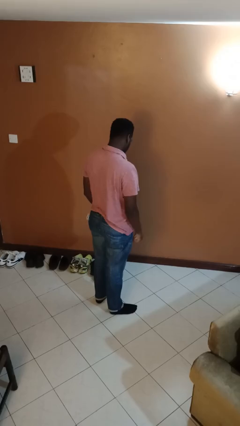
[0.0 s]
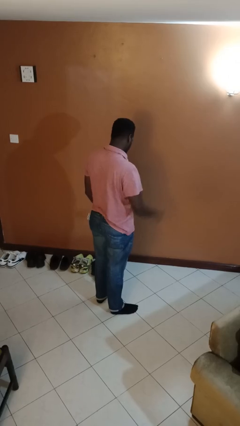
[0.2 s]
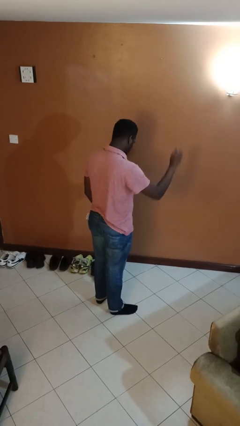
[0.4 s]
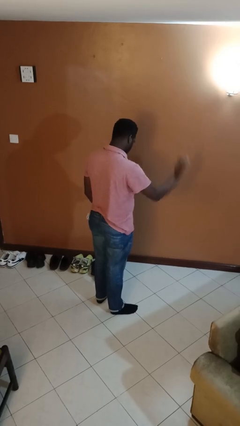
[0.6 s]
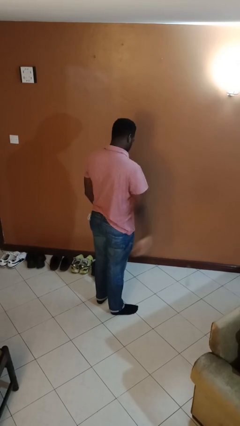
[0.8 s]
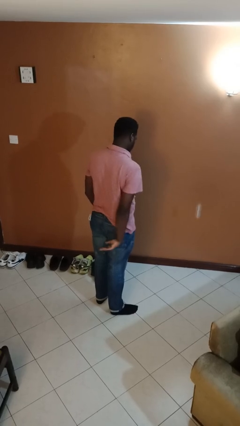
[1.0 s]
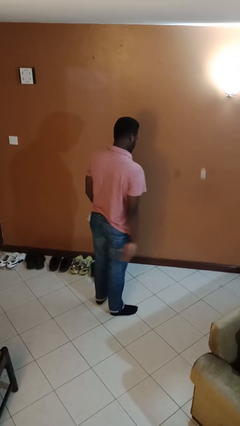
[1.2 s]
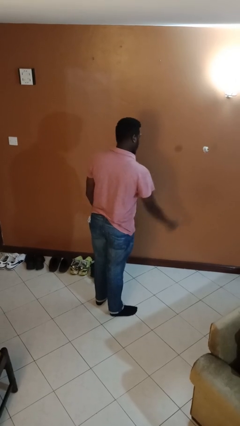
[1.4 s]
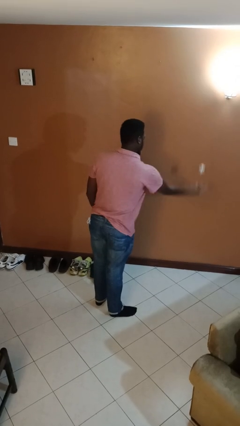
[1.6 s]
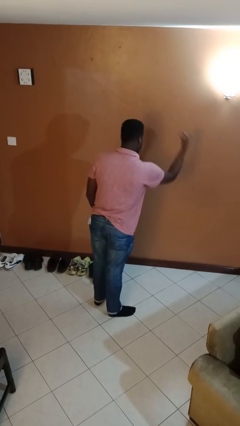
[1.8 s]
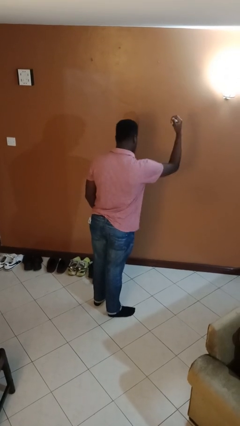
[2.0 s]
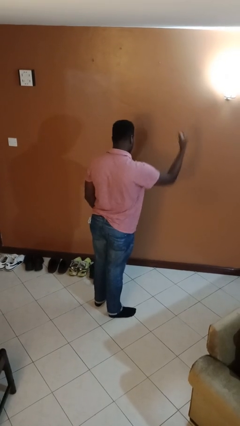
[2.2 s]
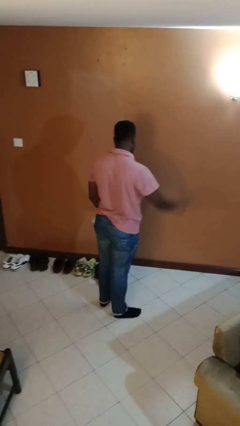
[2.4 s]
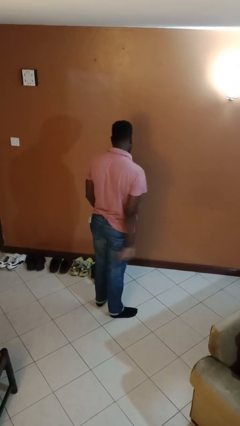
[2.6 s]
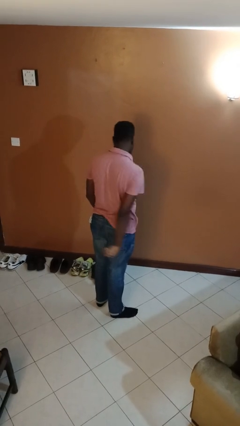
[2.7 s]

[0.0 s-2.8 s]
person bounces ball on floor

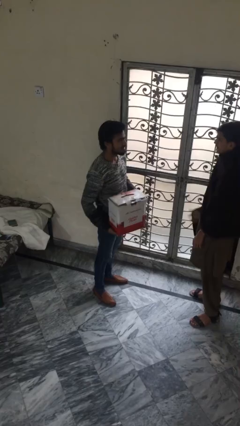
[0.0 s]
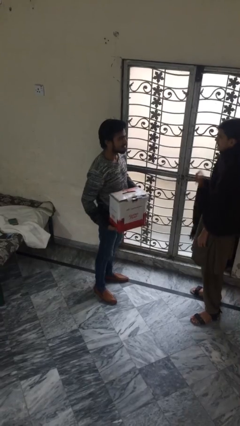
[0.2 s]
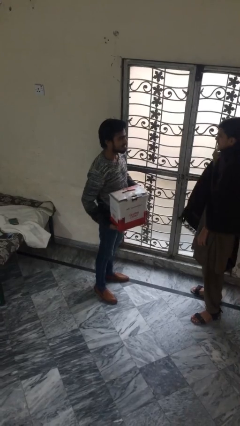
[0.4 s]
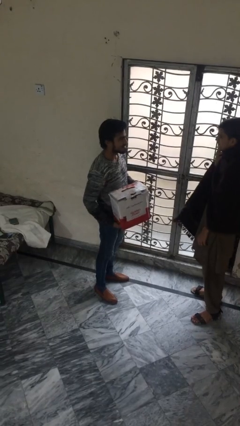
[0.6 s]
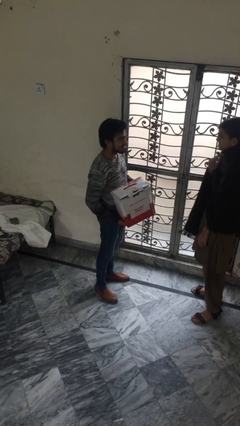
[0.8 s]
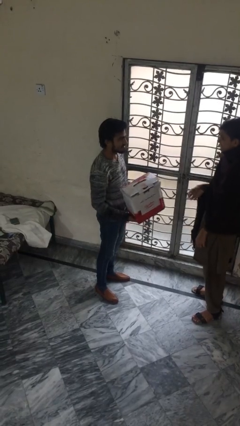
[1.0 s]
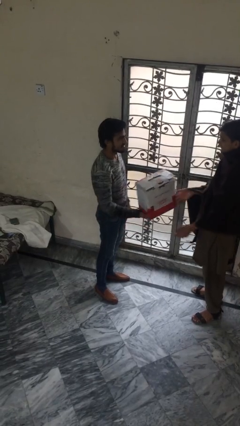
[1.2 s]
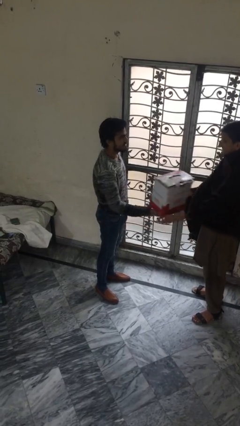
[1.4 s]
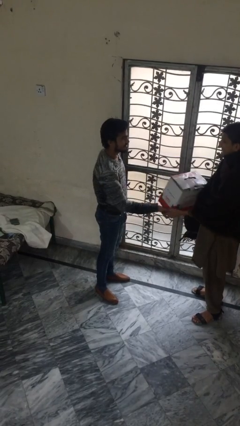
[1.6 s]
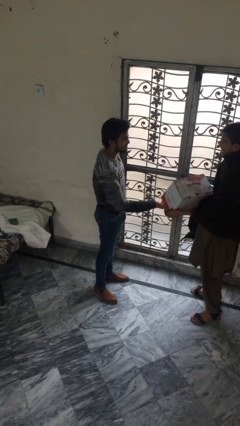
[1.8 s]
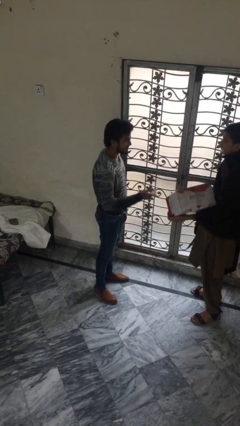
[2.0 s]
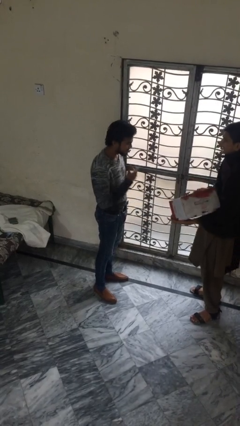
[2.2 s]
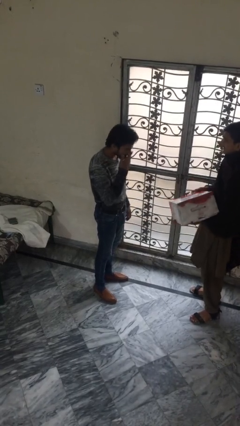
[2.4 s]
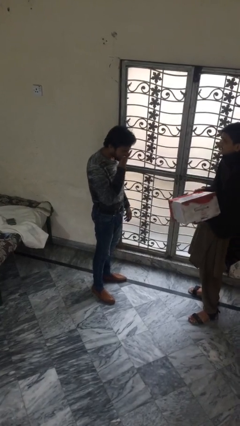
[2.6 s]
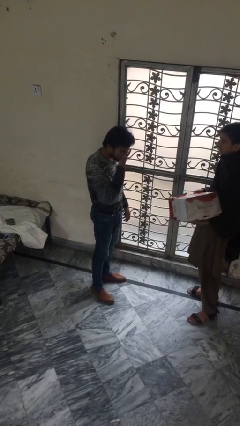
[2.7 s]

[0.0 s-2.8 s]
person transfers object to person

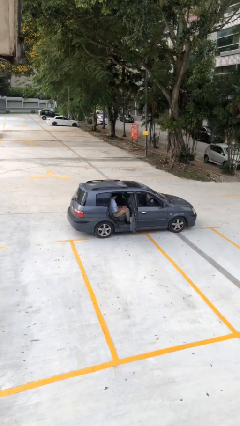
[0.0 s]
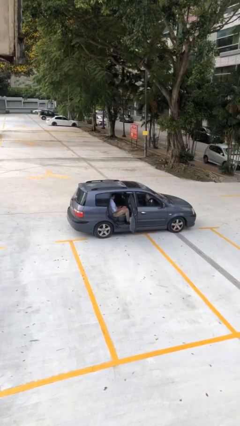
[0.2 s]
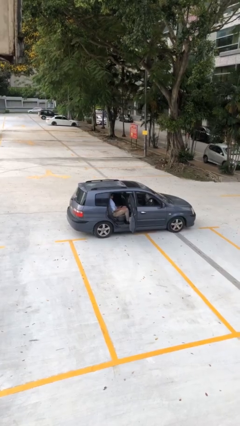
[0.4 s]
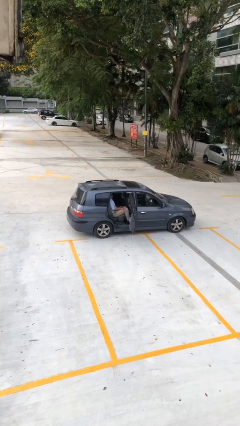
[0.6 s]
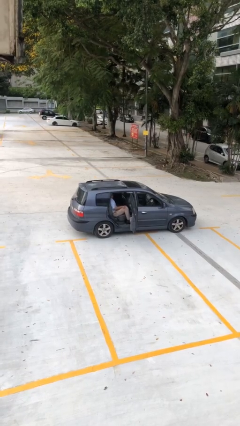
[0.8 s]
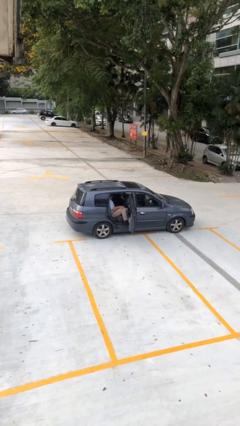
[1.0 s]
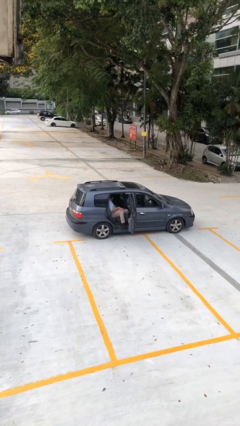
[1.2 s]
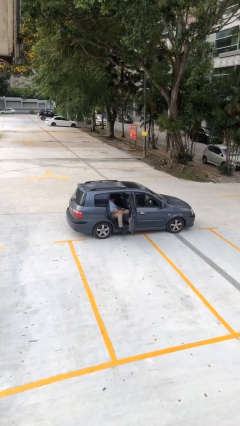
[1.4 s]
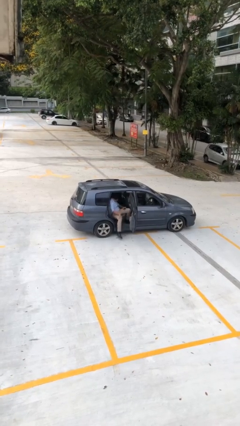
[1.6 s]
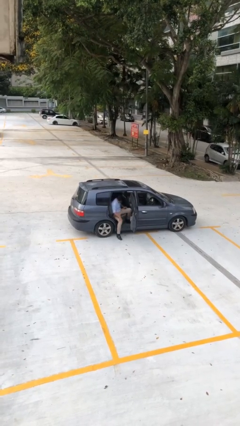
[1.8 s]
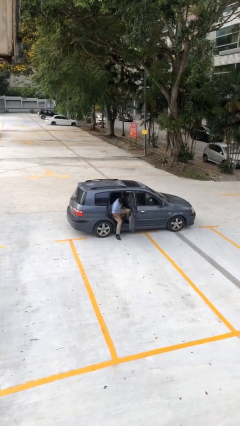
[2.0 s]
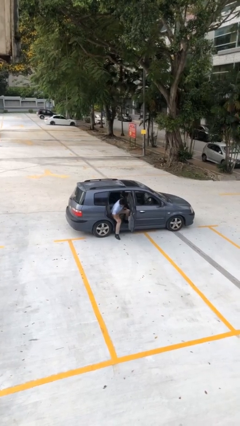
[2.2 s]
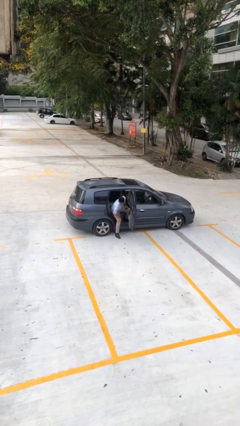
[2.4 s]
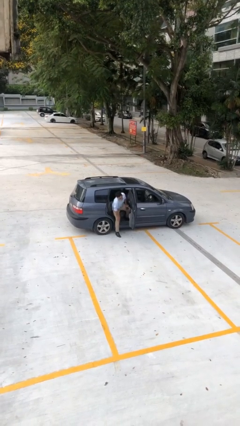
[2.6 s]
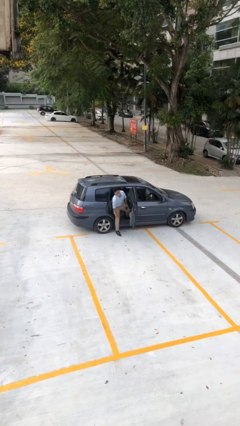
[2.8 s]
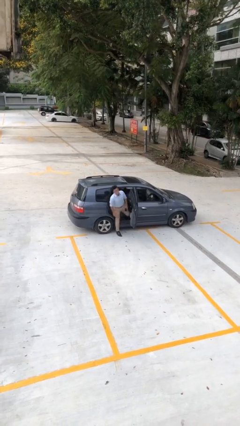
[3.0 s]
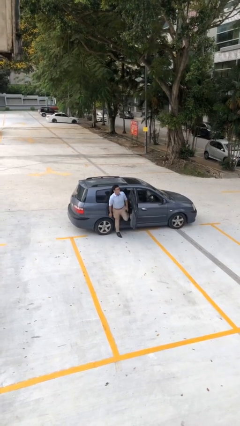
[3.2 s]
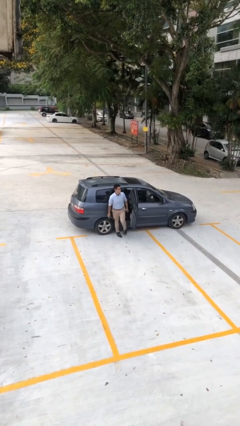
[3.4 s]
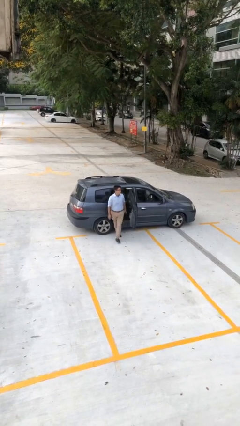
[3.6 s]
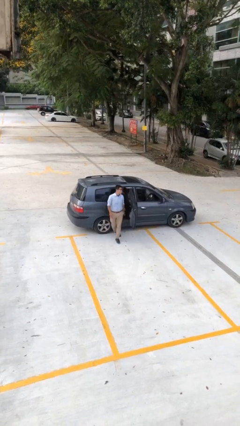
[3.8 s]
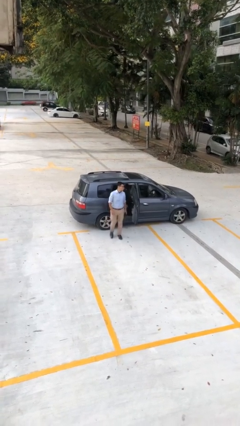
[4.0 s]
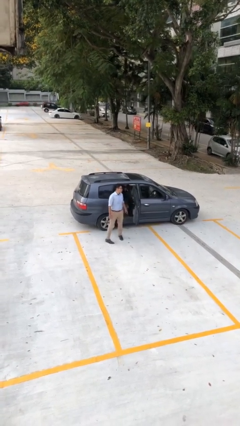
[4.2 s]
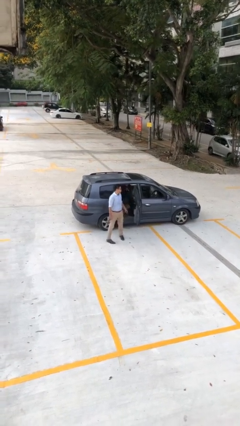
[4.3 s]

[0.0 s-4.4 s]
person exits car

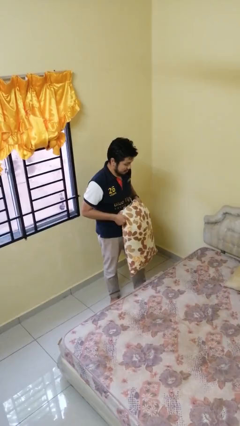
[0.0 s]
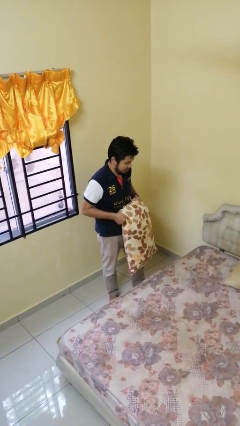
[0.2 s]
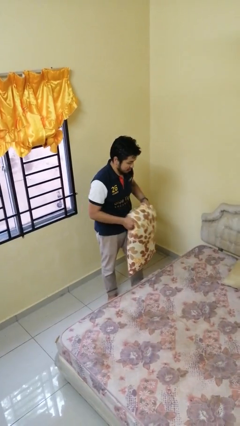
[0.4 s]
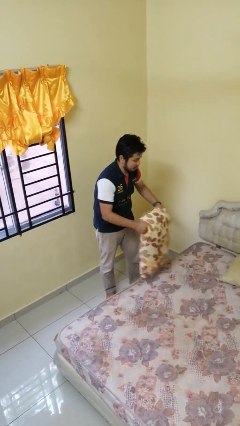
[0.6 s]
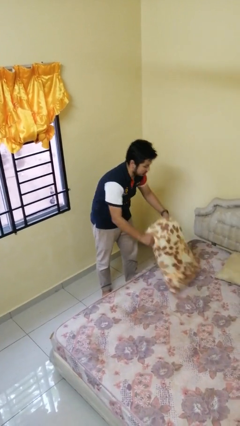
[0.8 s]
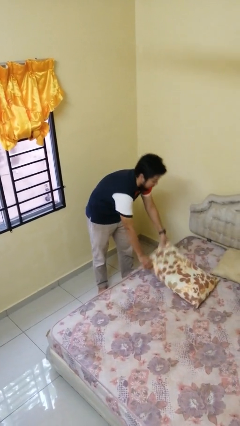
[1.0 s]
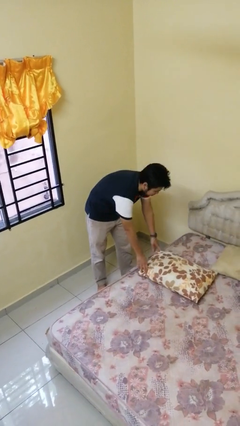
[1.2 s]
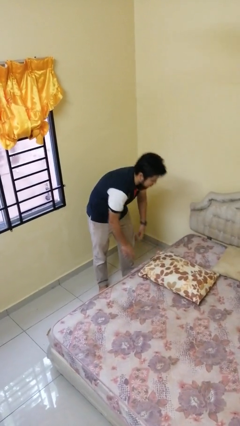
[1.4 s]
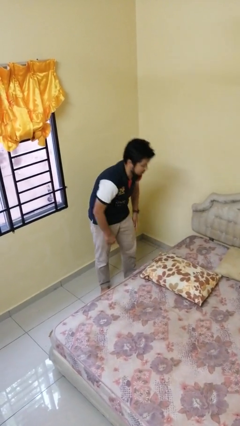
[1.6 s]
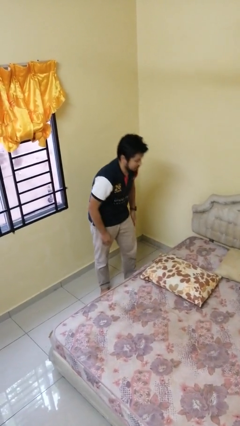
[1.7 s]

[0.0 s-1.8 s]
person puts down object on bed

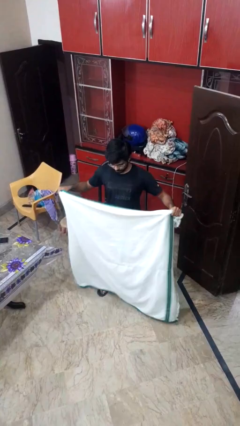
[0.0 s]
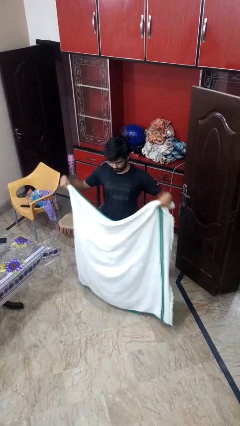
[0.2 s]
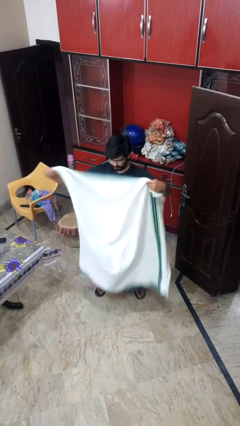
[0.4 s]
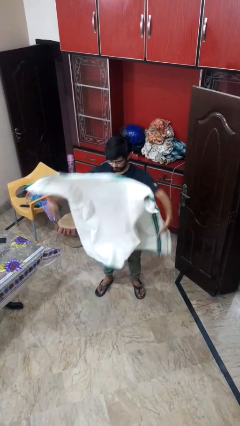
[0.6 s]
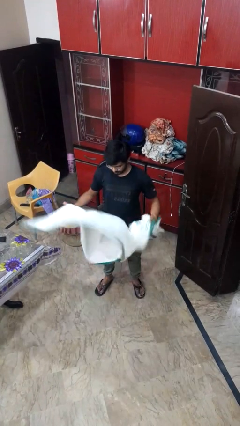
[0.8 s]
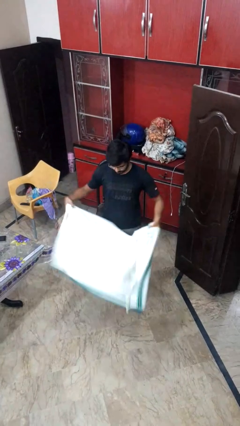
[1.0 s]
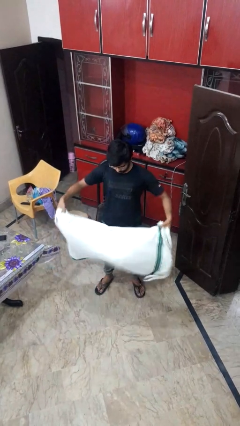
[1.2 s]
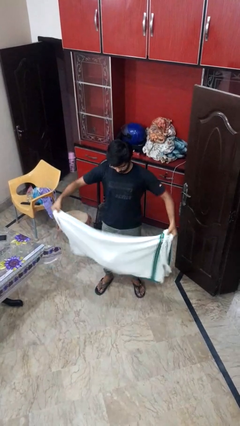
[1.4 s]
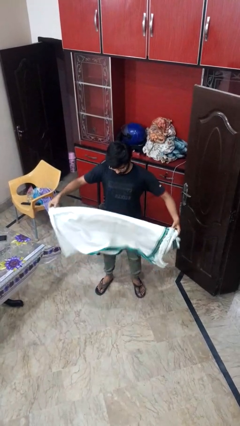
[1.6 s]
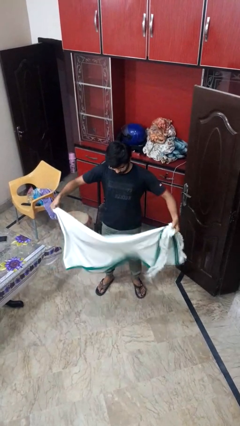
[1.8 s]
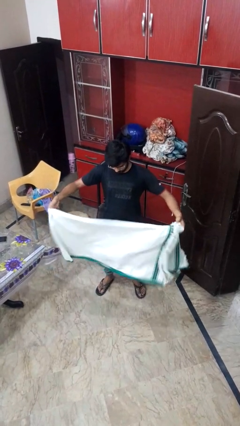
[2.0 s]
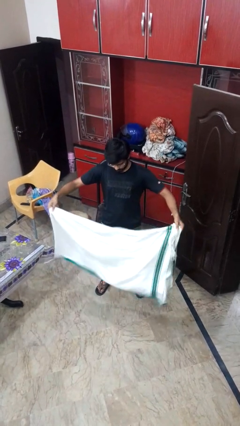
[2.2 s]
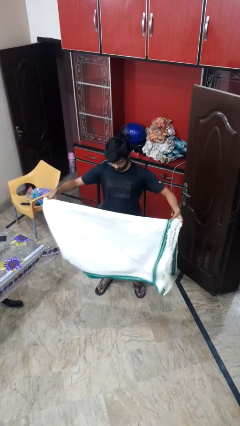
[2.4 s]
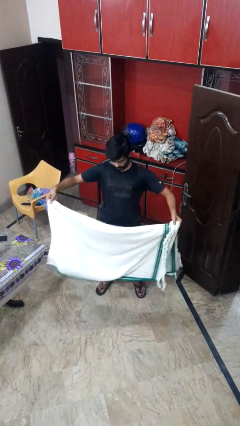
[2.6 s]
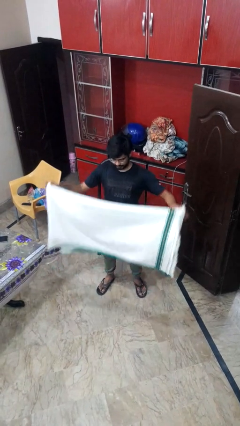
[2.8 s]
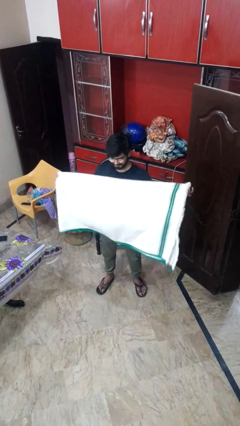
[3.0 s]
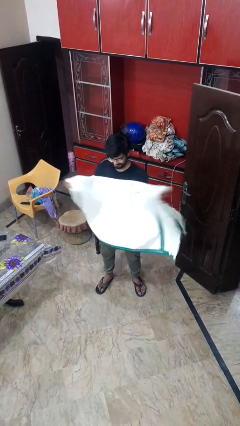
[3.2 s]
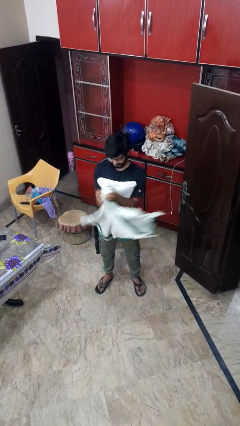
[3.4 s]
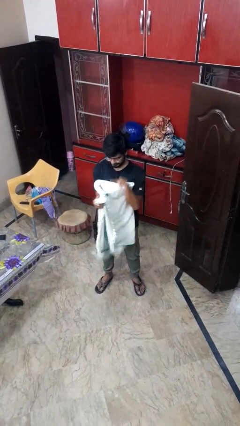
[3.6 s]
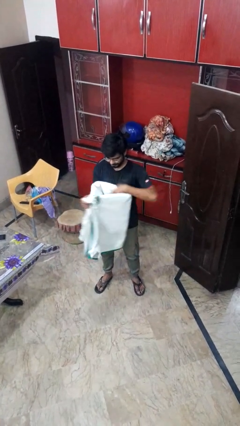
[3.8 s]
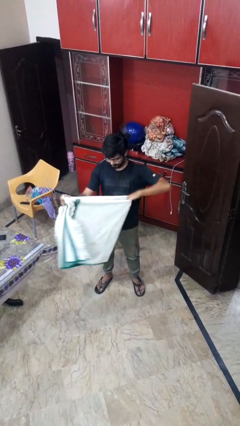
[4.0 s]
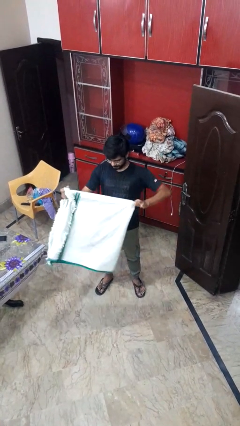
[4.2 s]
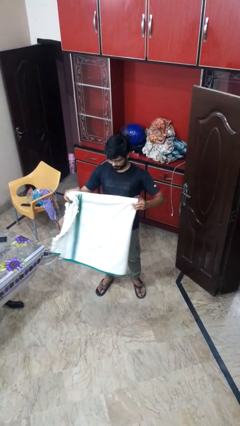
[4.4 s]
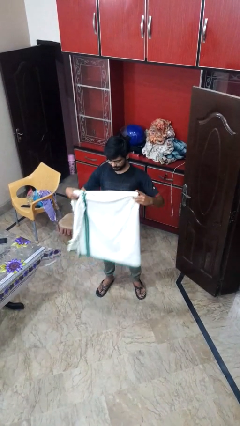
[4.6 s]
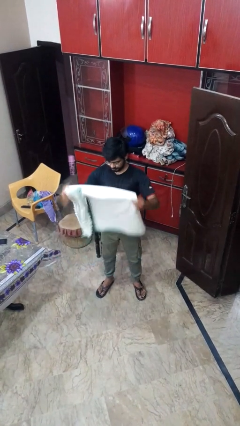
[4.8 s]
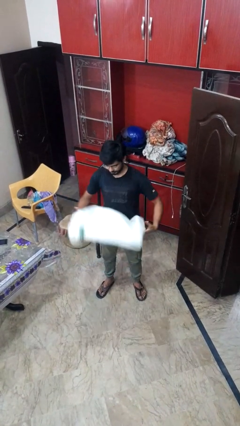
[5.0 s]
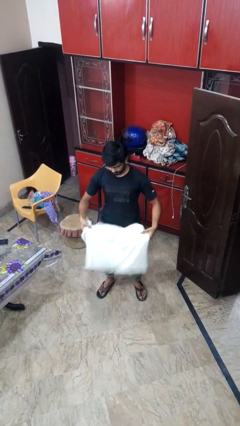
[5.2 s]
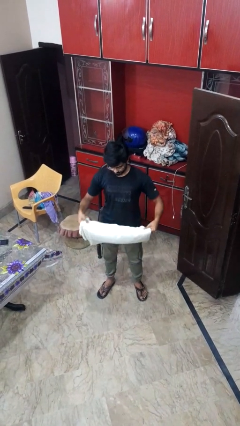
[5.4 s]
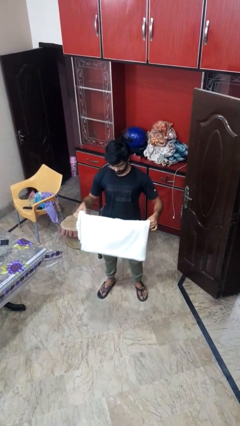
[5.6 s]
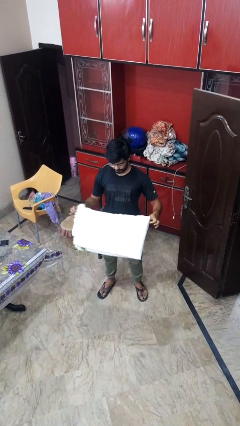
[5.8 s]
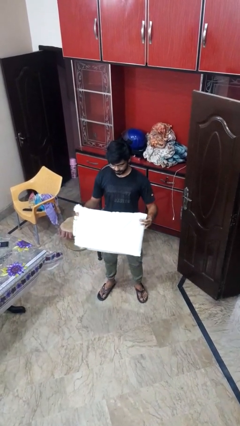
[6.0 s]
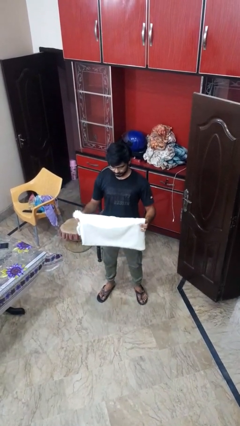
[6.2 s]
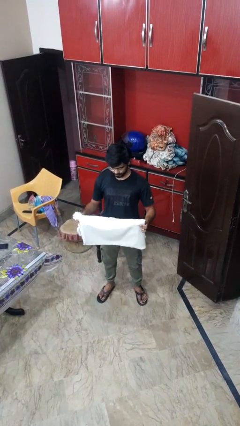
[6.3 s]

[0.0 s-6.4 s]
person folds blanket
